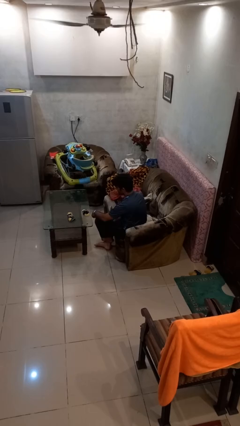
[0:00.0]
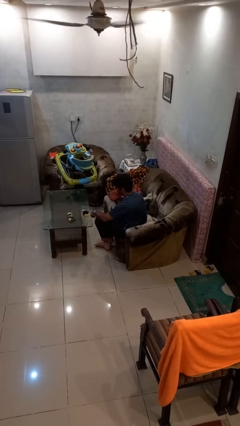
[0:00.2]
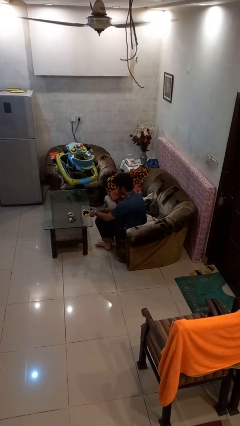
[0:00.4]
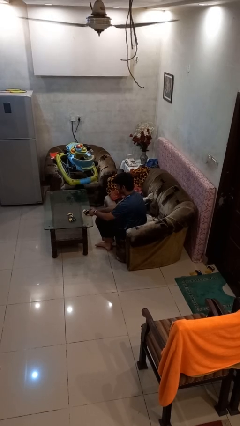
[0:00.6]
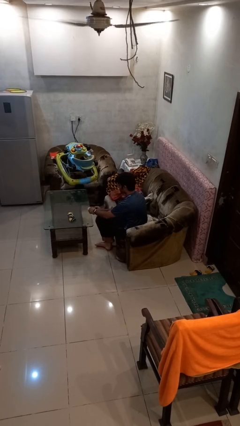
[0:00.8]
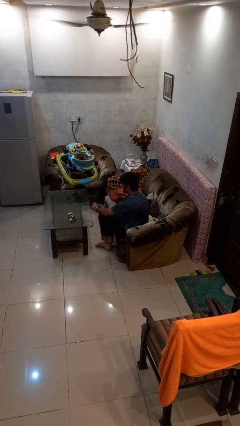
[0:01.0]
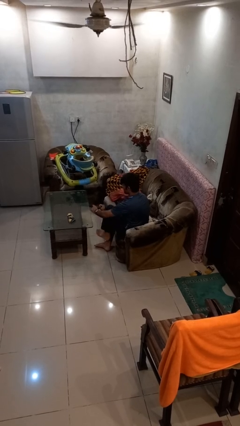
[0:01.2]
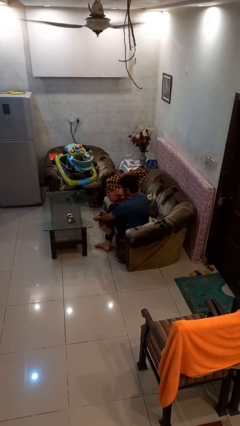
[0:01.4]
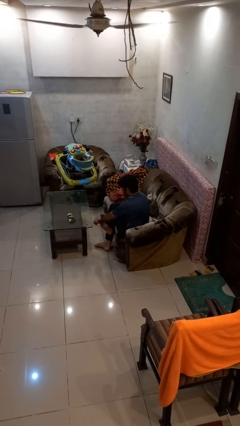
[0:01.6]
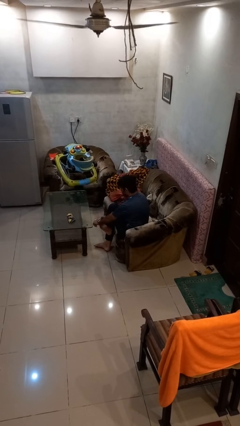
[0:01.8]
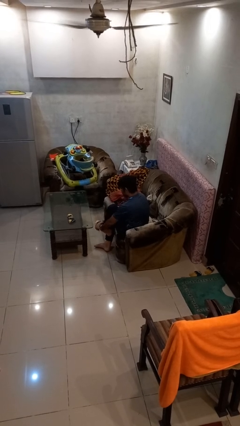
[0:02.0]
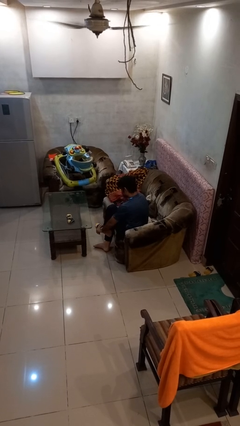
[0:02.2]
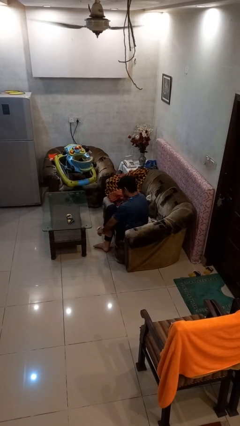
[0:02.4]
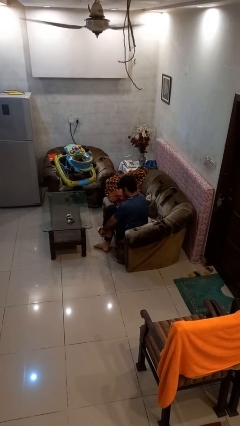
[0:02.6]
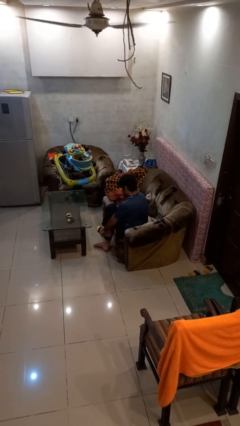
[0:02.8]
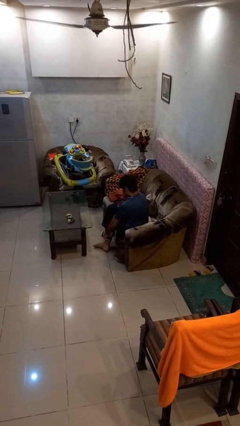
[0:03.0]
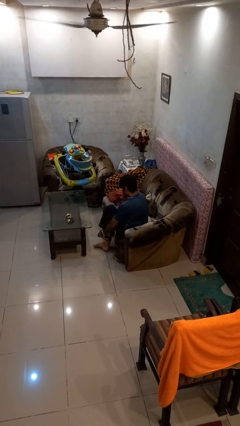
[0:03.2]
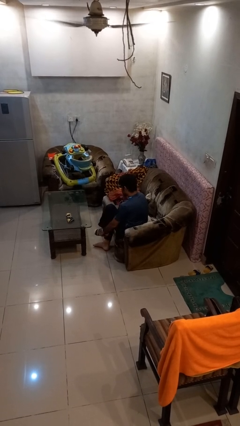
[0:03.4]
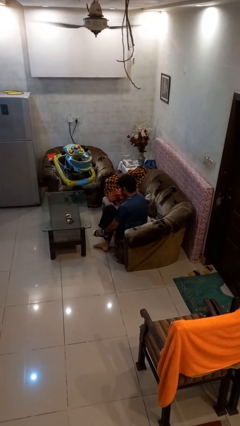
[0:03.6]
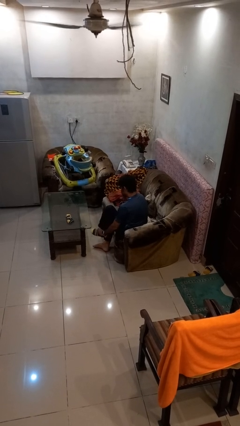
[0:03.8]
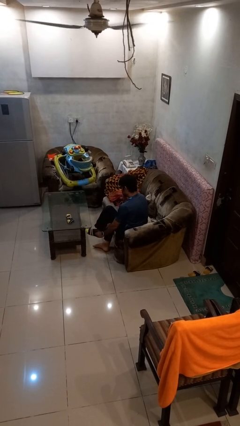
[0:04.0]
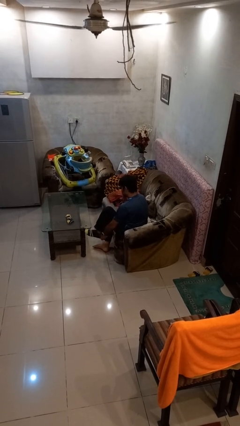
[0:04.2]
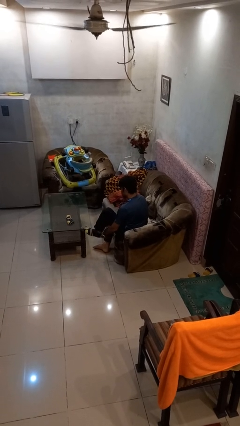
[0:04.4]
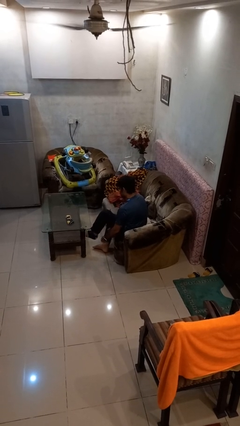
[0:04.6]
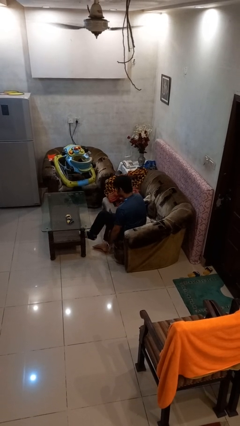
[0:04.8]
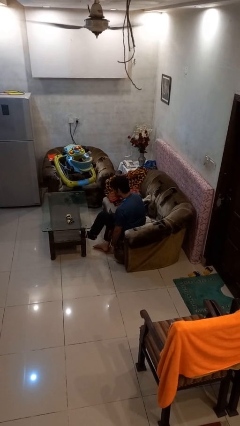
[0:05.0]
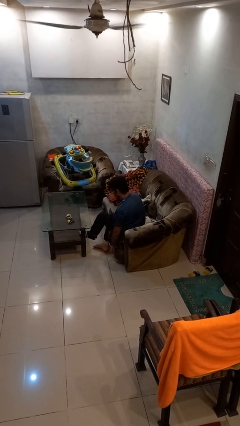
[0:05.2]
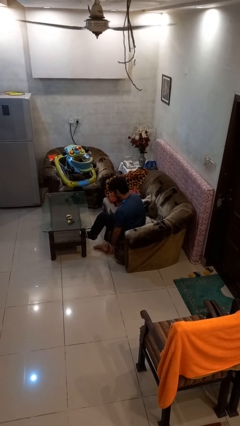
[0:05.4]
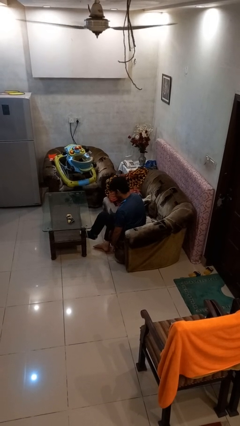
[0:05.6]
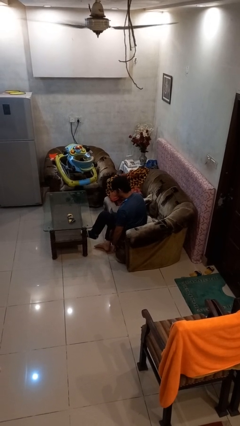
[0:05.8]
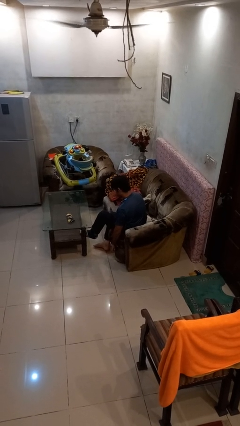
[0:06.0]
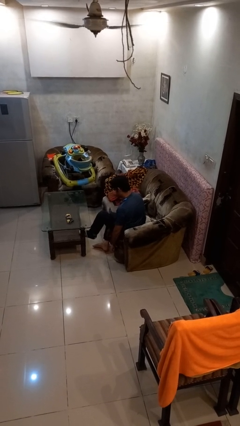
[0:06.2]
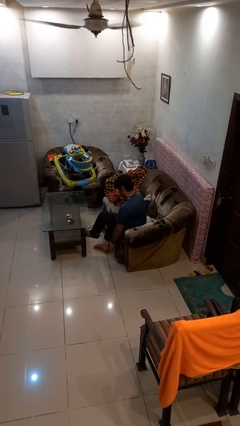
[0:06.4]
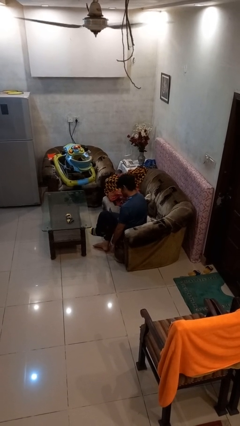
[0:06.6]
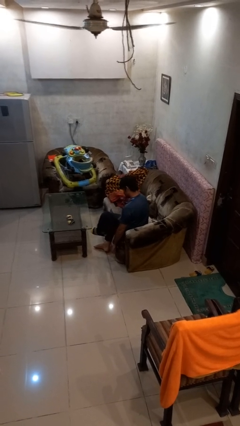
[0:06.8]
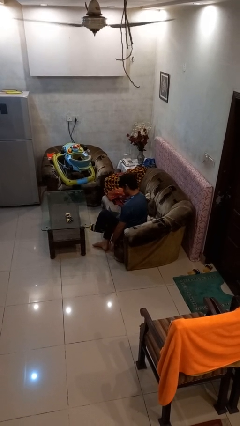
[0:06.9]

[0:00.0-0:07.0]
person puts on socks

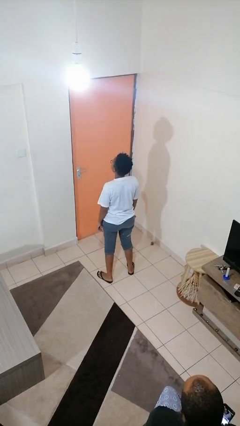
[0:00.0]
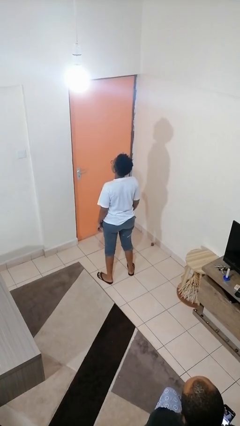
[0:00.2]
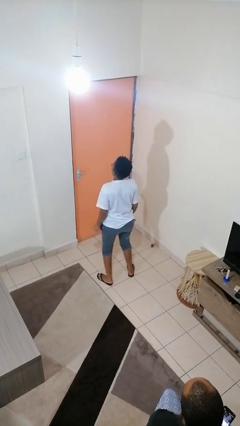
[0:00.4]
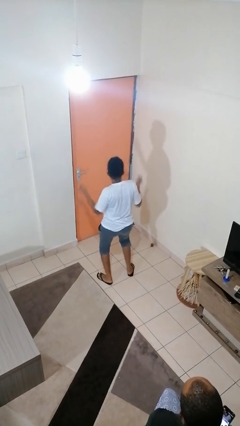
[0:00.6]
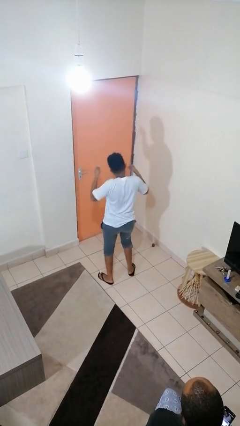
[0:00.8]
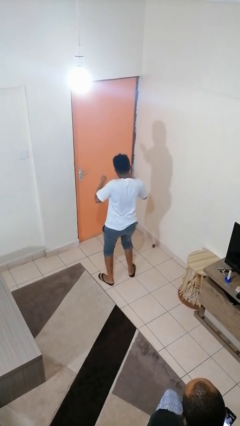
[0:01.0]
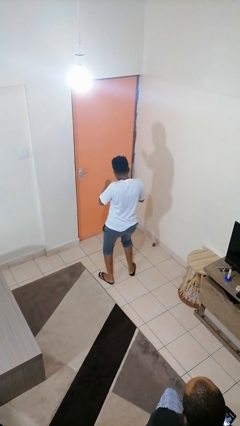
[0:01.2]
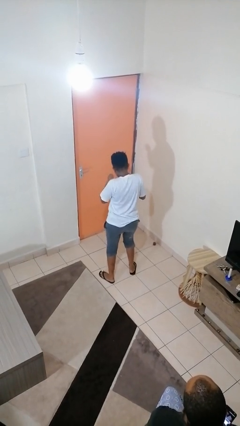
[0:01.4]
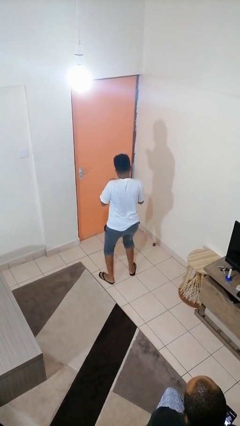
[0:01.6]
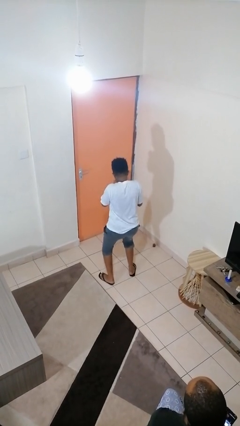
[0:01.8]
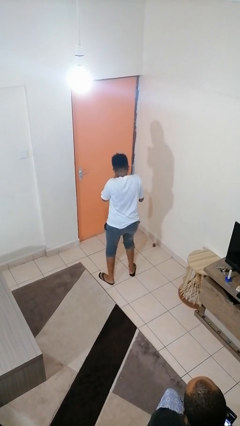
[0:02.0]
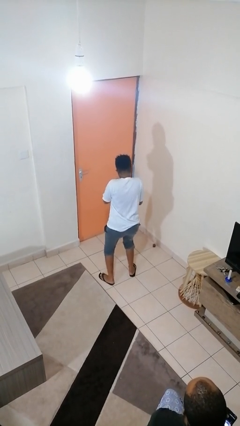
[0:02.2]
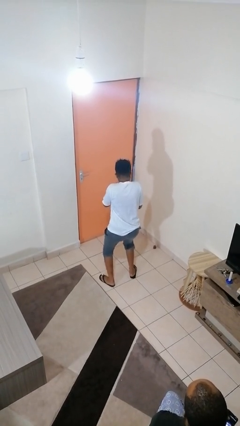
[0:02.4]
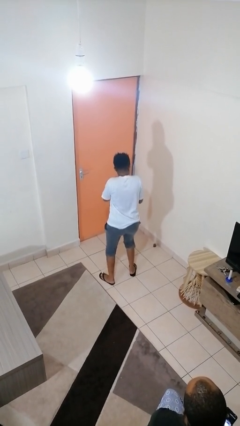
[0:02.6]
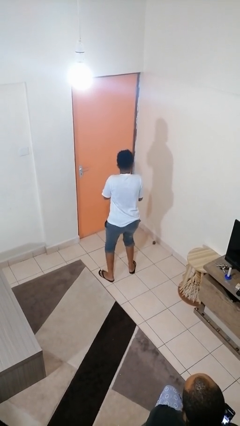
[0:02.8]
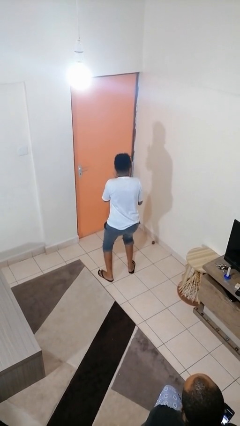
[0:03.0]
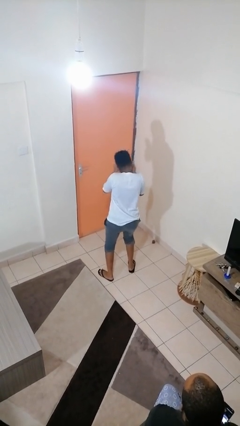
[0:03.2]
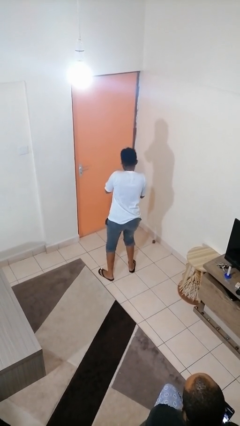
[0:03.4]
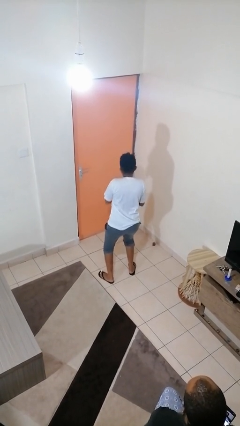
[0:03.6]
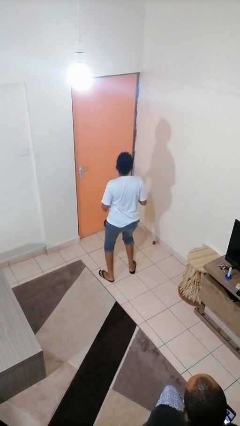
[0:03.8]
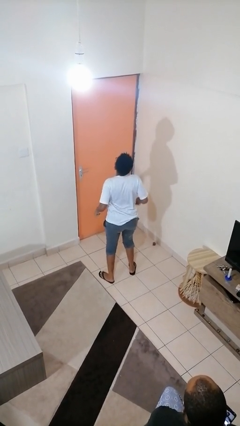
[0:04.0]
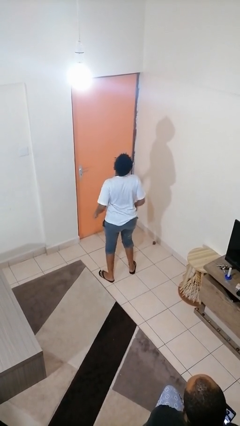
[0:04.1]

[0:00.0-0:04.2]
person dances in place

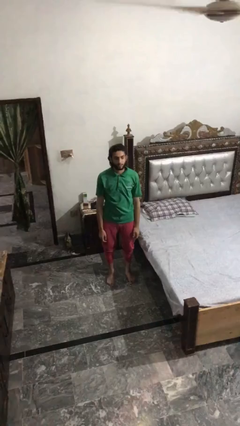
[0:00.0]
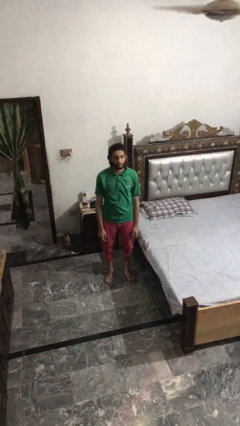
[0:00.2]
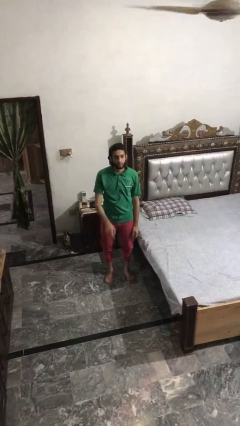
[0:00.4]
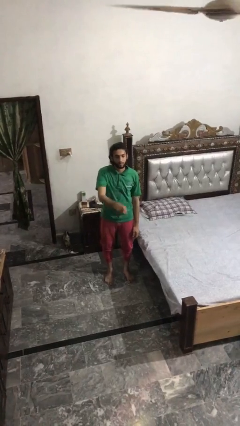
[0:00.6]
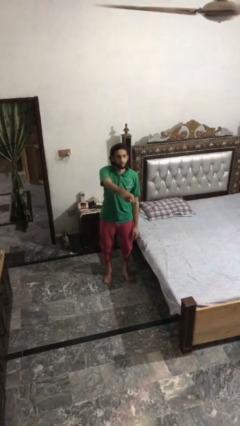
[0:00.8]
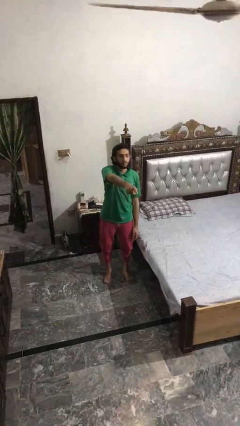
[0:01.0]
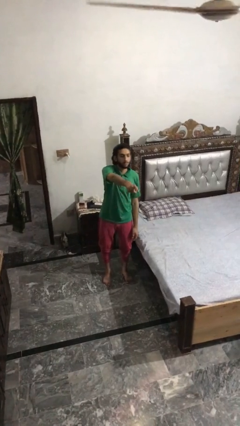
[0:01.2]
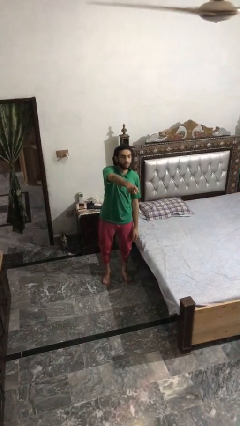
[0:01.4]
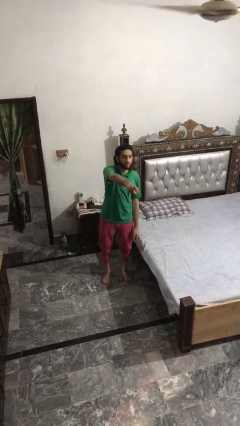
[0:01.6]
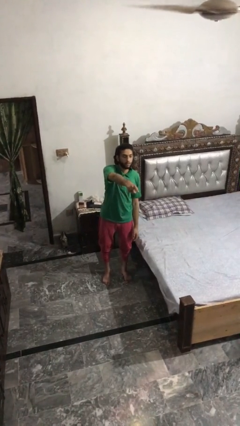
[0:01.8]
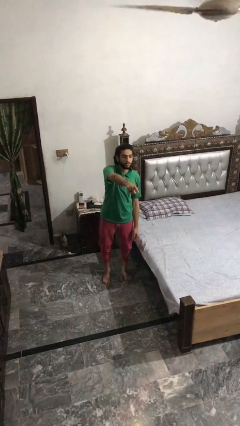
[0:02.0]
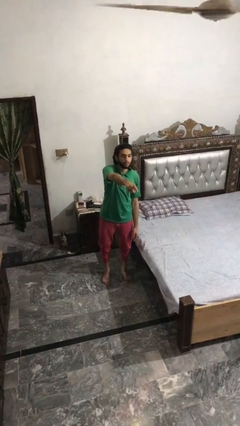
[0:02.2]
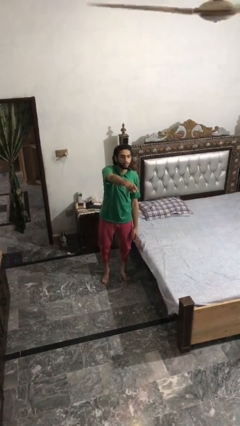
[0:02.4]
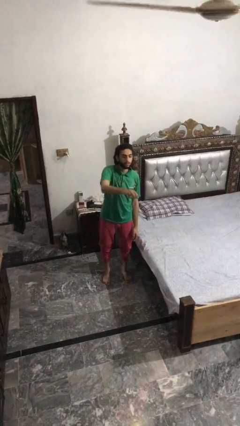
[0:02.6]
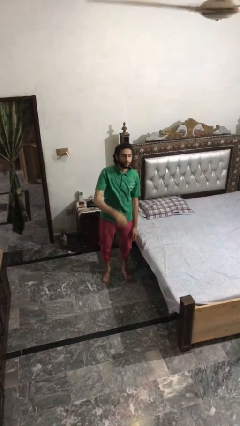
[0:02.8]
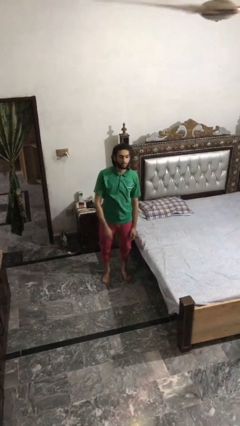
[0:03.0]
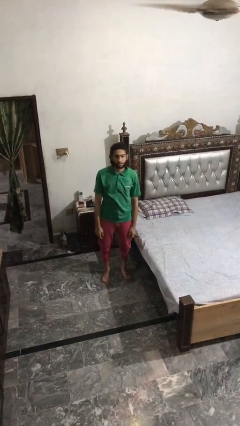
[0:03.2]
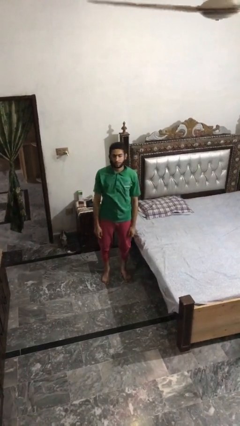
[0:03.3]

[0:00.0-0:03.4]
person points at person

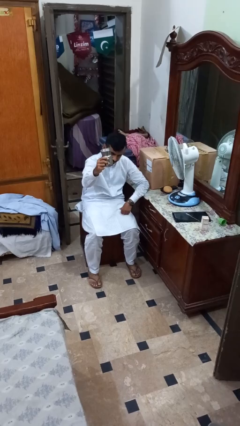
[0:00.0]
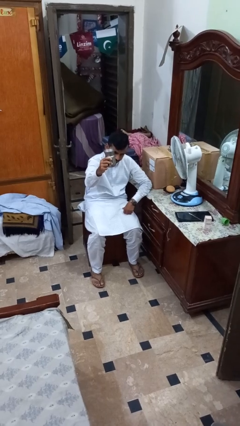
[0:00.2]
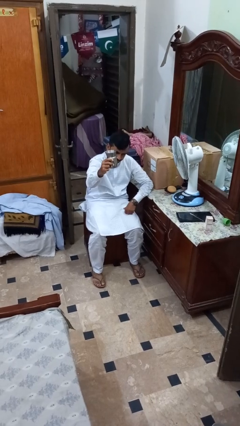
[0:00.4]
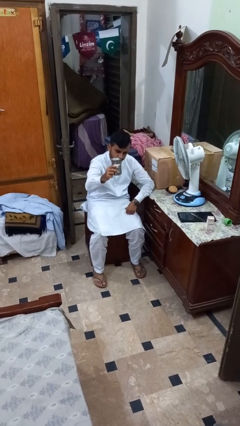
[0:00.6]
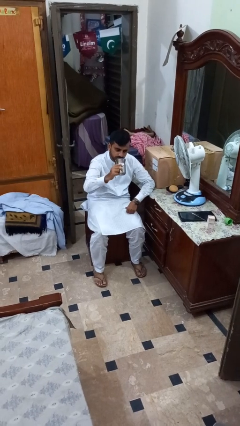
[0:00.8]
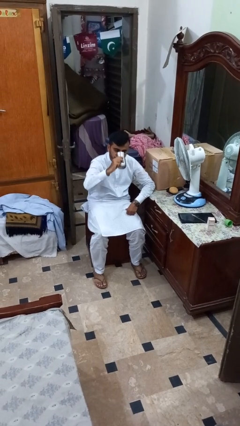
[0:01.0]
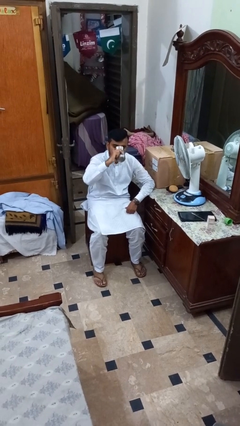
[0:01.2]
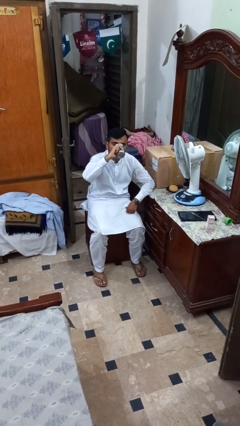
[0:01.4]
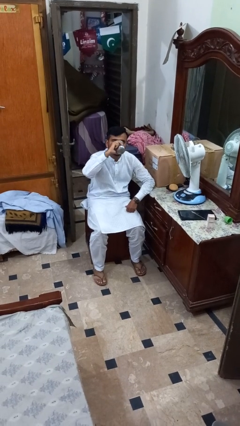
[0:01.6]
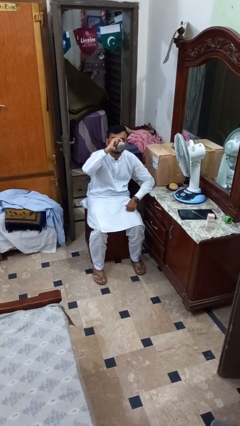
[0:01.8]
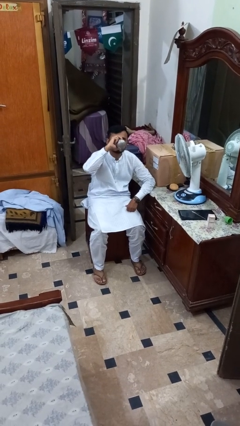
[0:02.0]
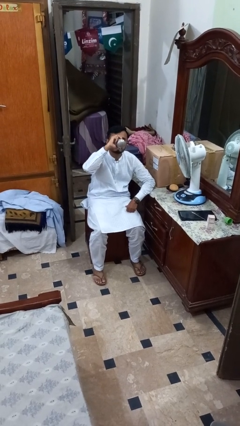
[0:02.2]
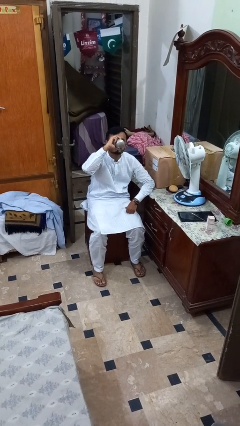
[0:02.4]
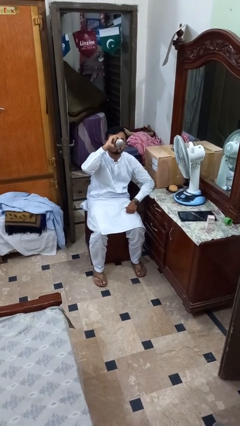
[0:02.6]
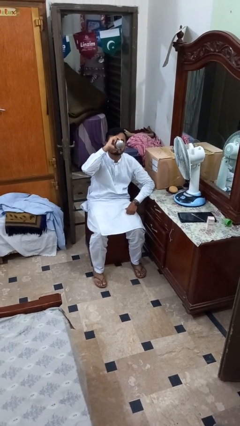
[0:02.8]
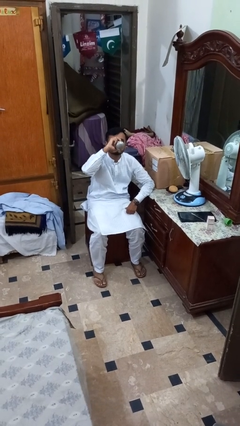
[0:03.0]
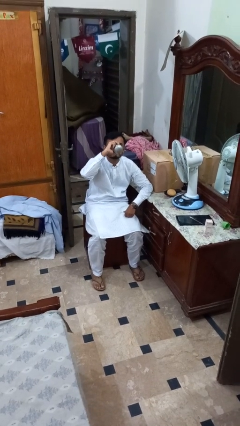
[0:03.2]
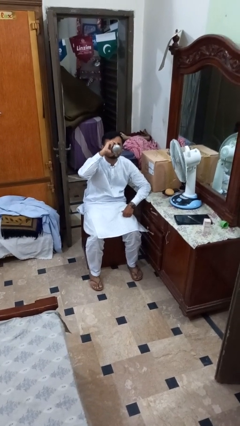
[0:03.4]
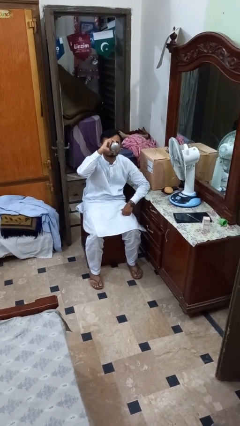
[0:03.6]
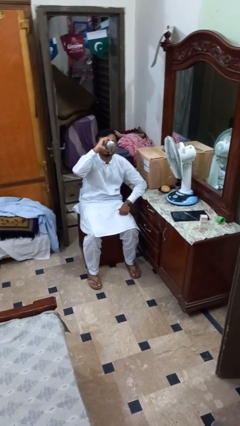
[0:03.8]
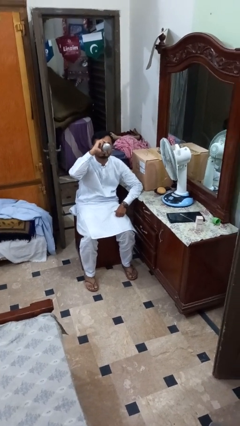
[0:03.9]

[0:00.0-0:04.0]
person drinks from shotglass
